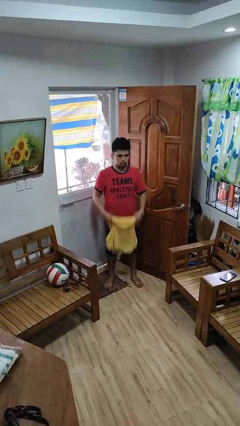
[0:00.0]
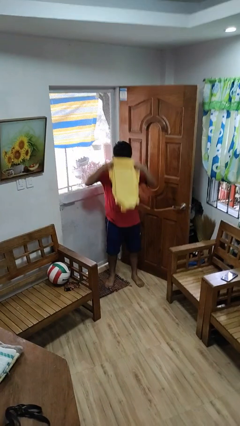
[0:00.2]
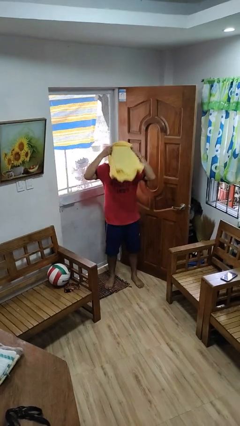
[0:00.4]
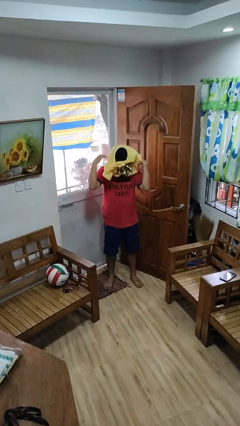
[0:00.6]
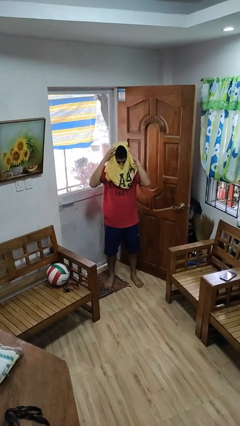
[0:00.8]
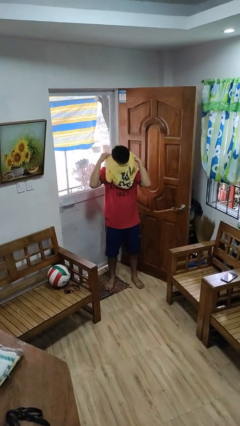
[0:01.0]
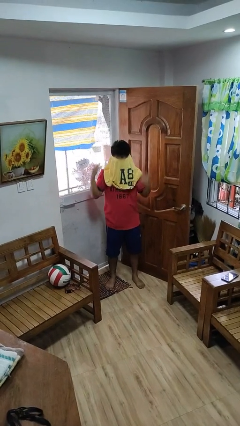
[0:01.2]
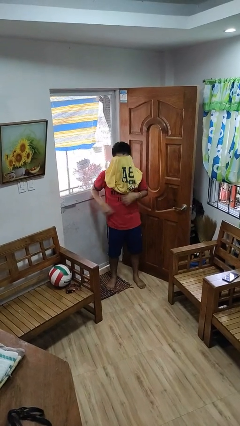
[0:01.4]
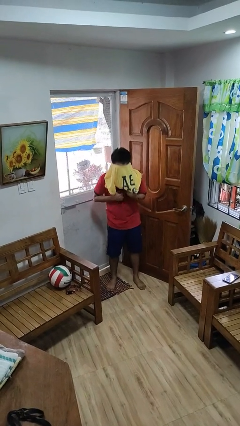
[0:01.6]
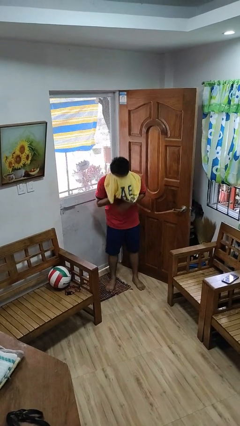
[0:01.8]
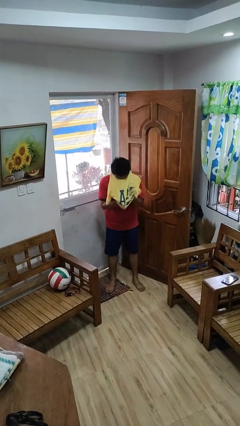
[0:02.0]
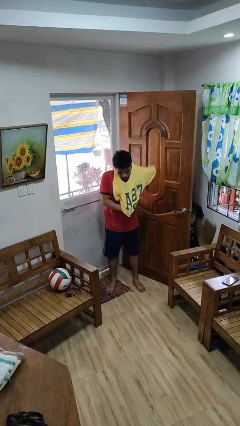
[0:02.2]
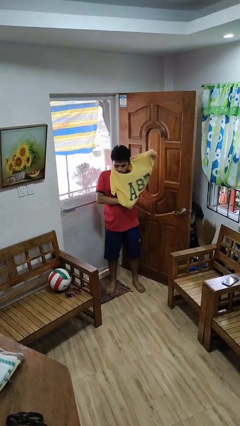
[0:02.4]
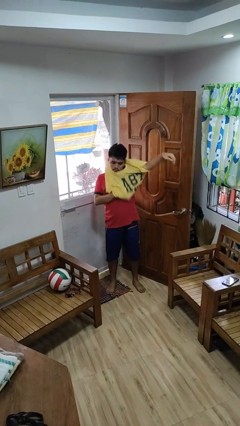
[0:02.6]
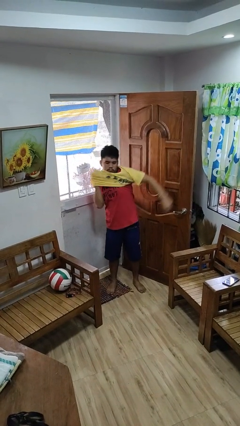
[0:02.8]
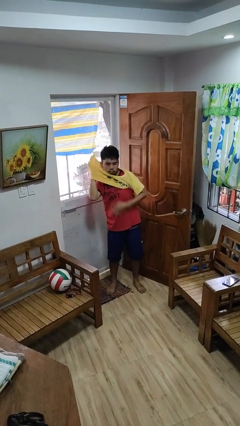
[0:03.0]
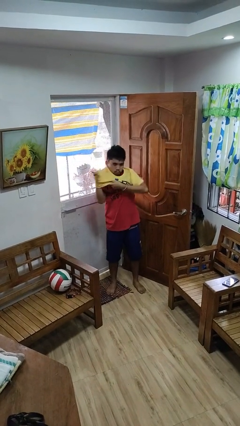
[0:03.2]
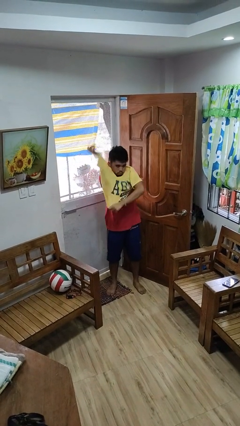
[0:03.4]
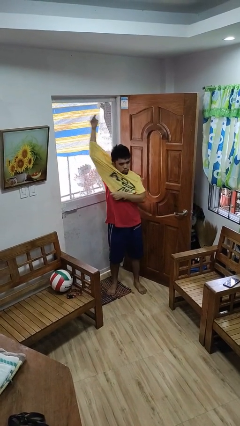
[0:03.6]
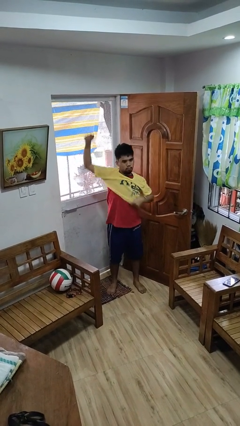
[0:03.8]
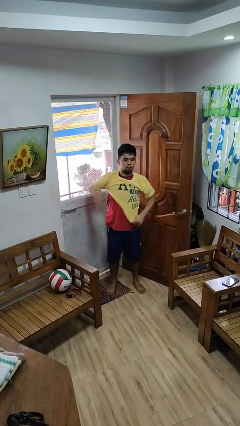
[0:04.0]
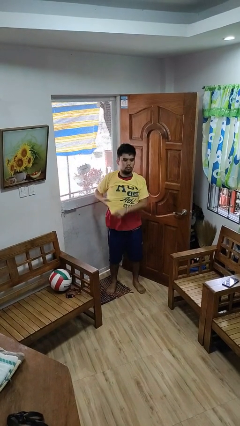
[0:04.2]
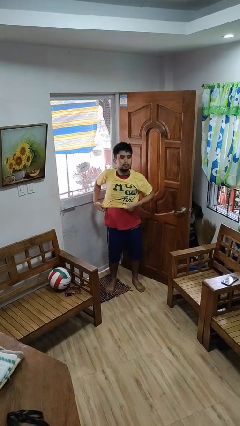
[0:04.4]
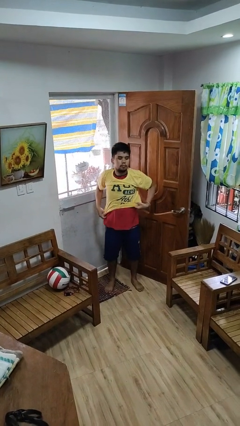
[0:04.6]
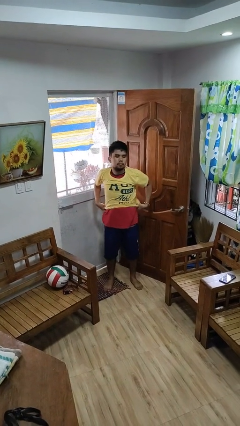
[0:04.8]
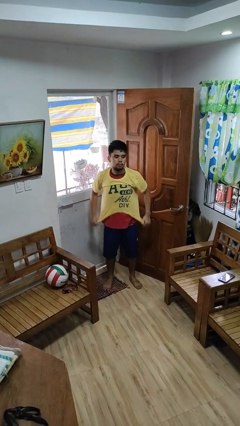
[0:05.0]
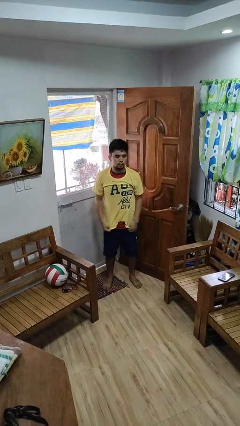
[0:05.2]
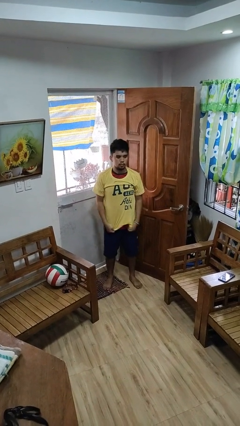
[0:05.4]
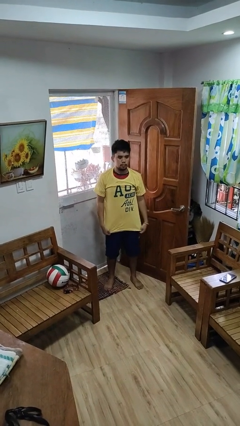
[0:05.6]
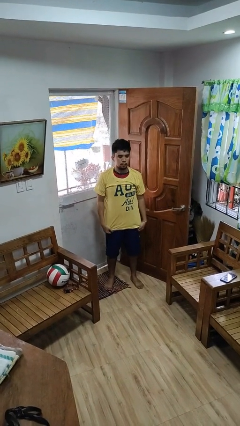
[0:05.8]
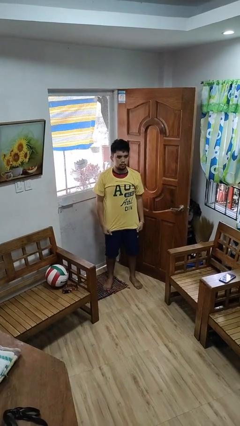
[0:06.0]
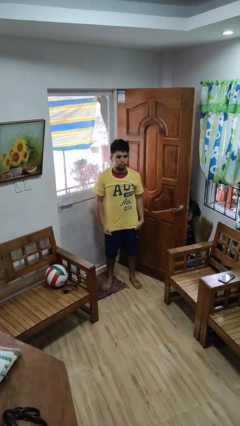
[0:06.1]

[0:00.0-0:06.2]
person puts on shirt

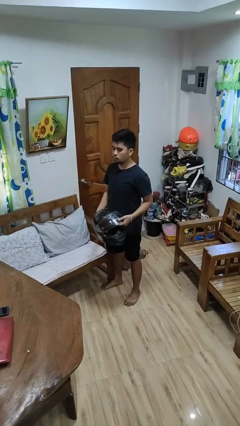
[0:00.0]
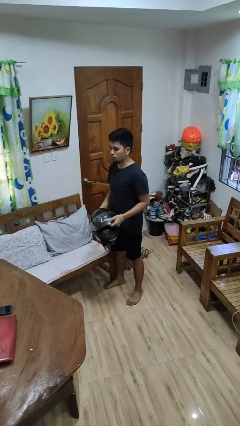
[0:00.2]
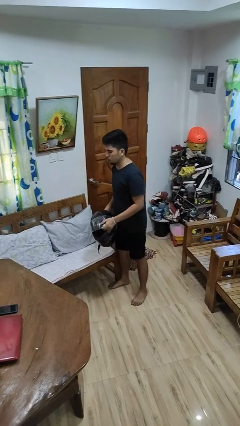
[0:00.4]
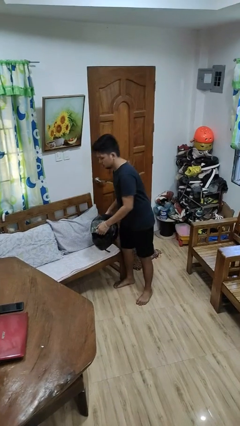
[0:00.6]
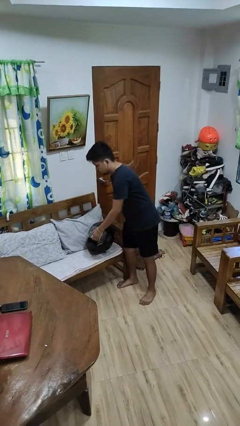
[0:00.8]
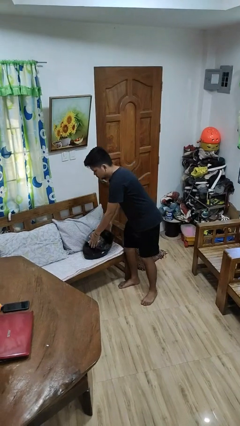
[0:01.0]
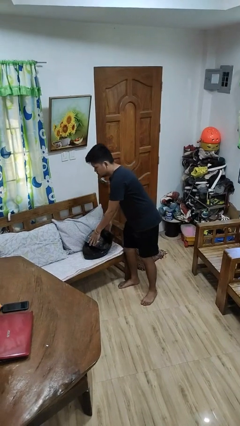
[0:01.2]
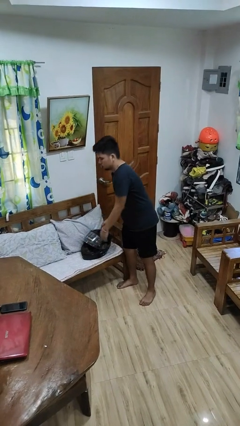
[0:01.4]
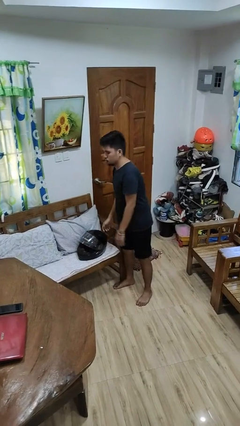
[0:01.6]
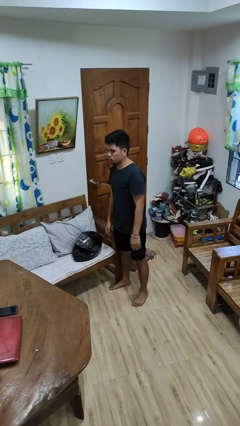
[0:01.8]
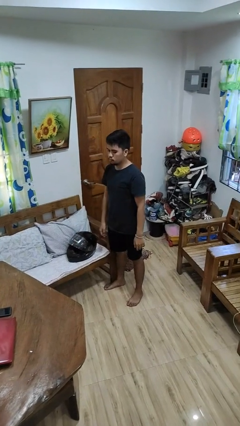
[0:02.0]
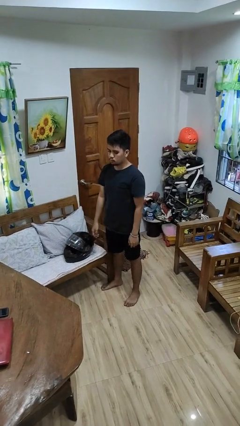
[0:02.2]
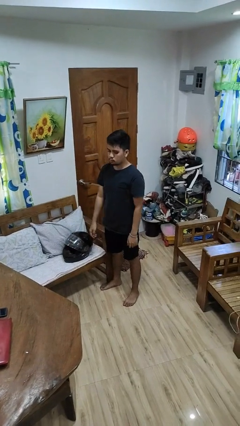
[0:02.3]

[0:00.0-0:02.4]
person puts down object on couch

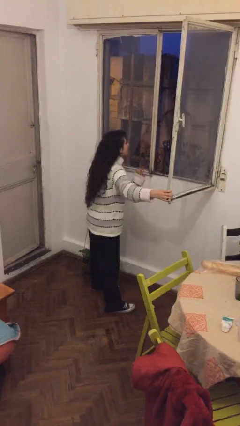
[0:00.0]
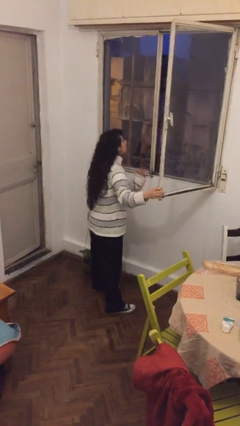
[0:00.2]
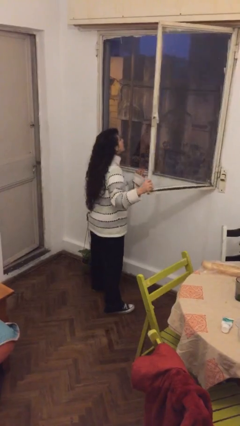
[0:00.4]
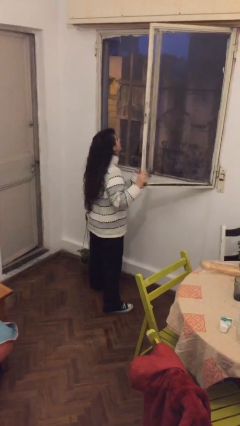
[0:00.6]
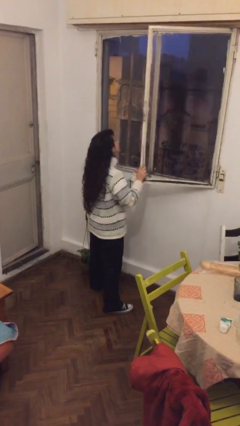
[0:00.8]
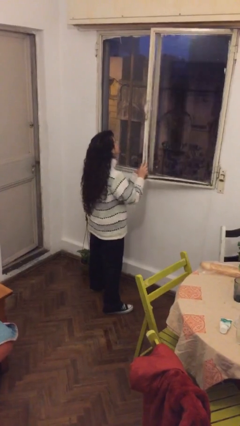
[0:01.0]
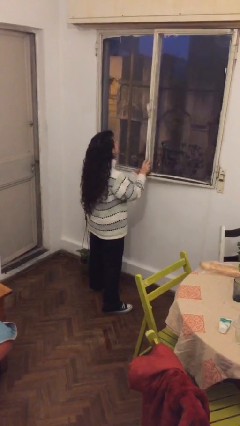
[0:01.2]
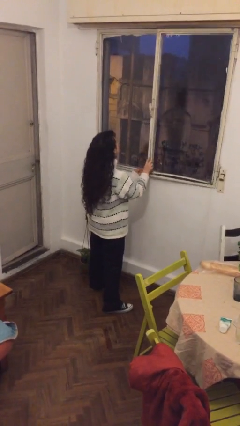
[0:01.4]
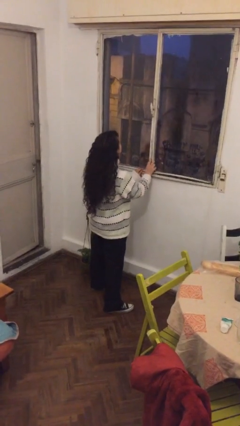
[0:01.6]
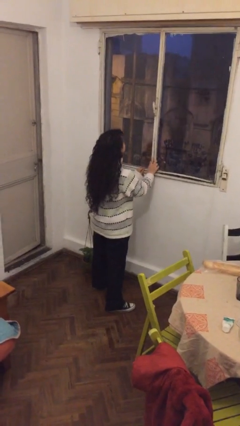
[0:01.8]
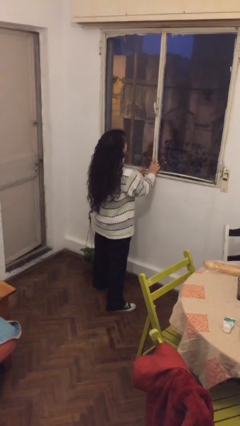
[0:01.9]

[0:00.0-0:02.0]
person closes home window

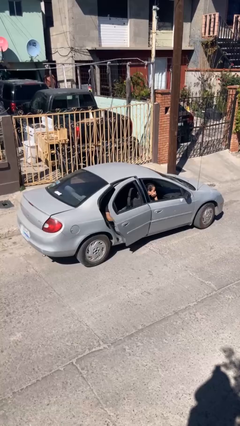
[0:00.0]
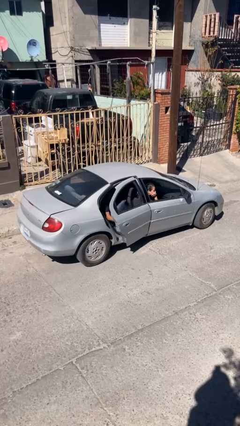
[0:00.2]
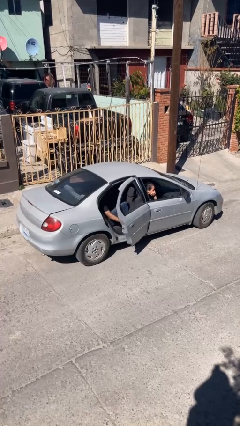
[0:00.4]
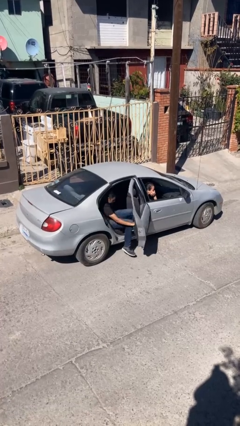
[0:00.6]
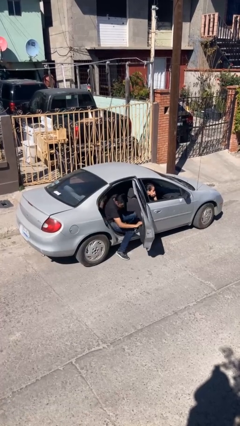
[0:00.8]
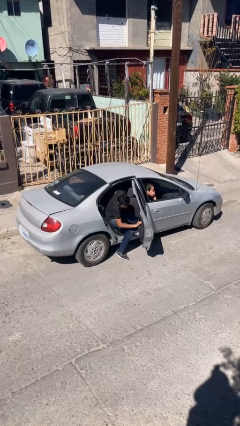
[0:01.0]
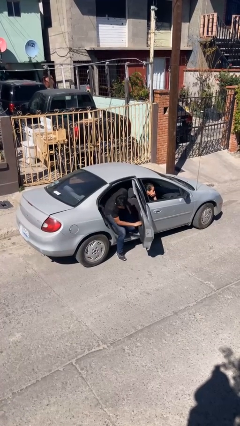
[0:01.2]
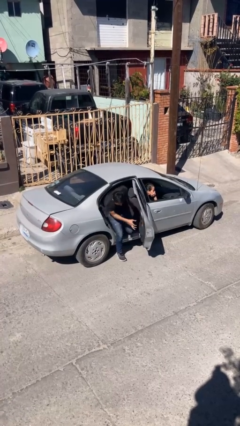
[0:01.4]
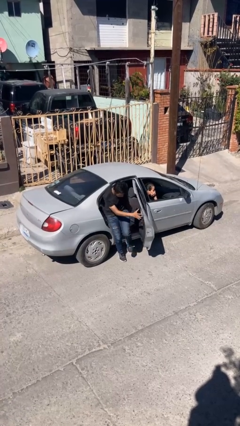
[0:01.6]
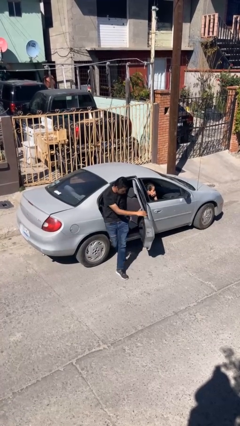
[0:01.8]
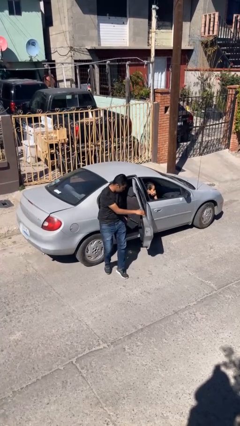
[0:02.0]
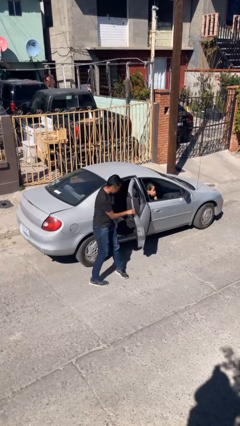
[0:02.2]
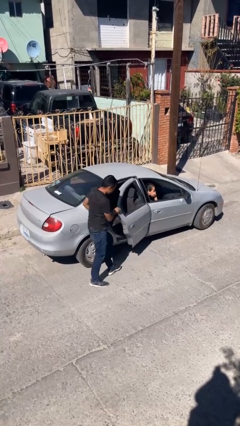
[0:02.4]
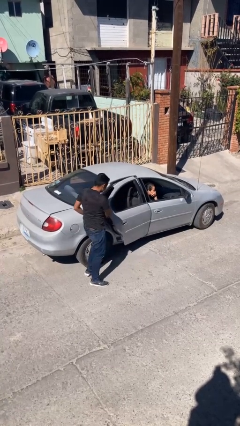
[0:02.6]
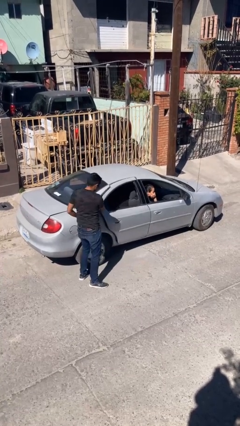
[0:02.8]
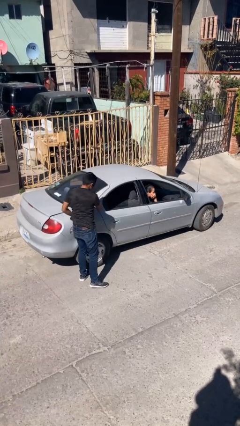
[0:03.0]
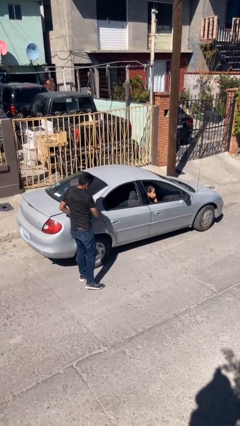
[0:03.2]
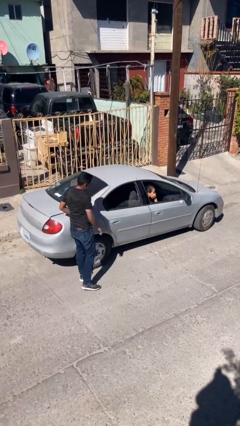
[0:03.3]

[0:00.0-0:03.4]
car drops off person

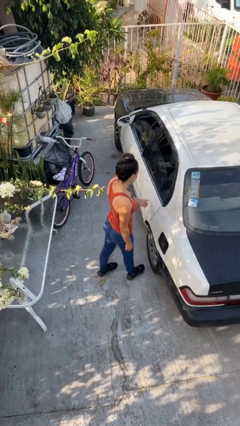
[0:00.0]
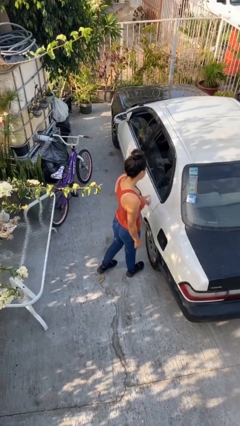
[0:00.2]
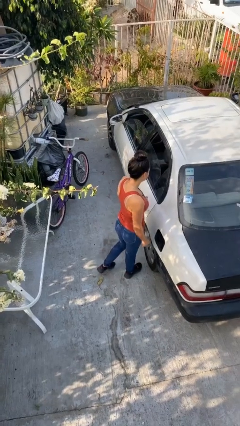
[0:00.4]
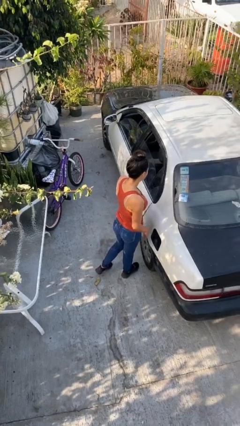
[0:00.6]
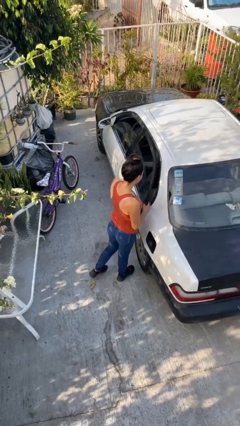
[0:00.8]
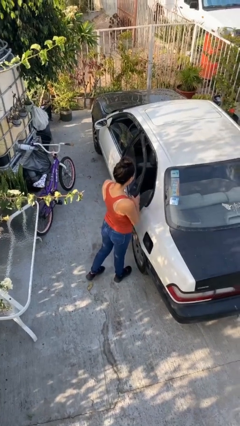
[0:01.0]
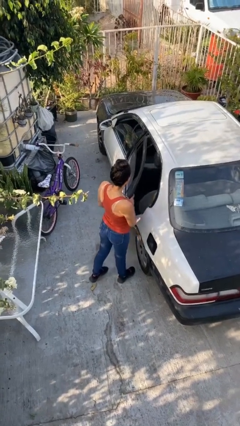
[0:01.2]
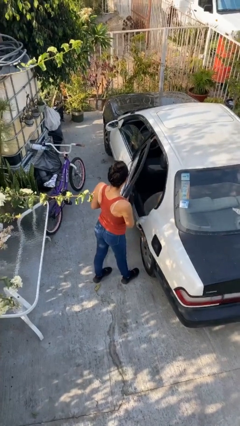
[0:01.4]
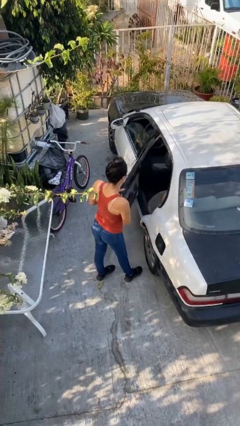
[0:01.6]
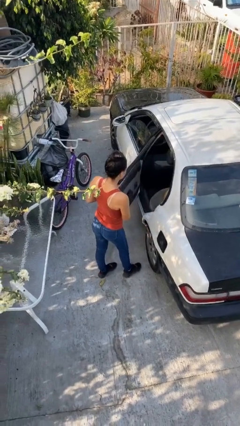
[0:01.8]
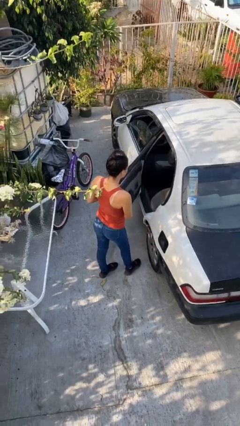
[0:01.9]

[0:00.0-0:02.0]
person opens car door

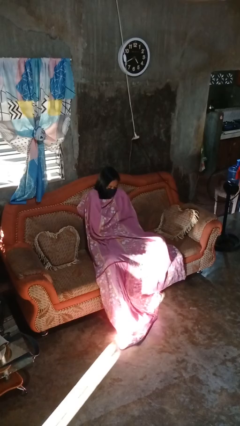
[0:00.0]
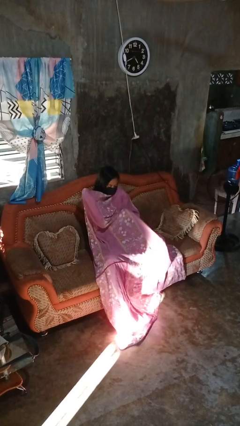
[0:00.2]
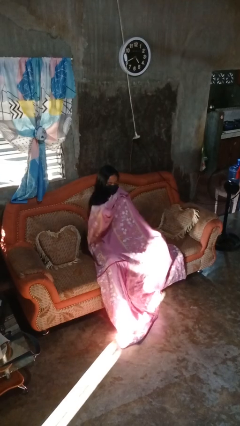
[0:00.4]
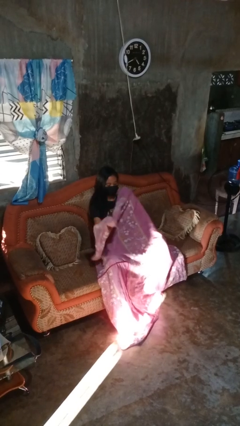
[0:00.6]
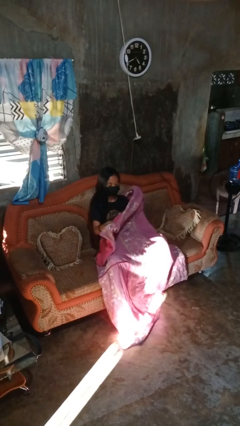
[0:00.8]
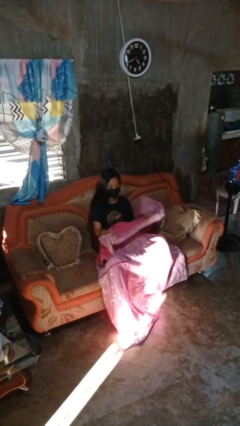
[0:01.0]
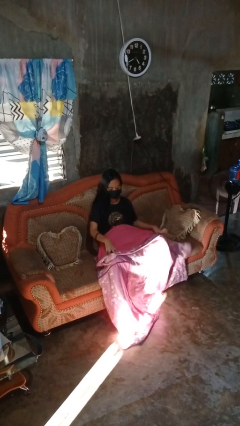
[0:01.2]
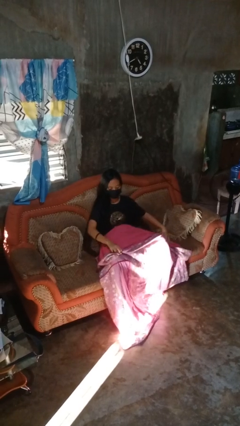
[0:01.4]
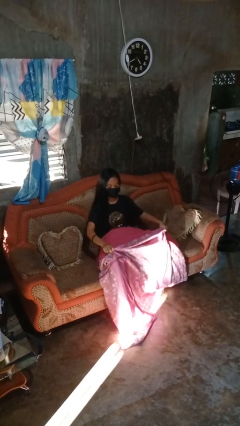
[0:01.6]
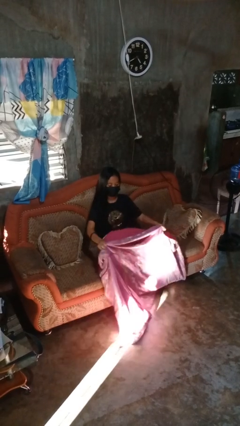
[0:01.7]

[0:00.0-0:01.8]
person uncovers with blanket
